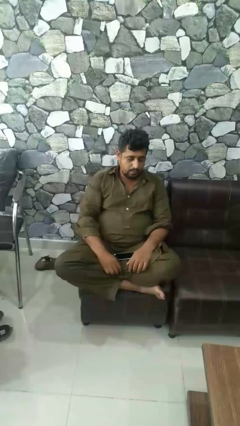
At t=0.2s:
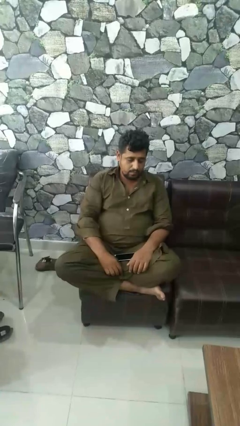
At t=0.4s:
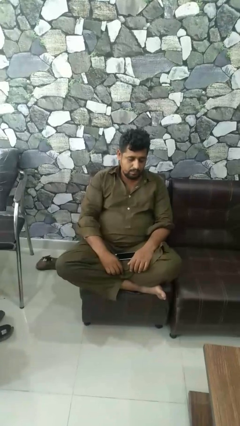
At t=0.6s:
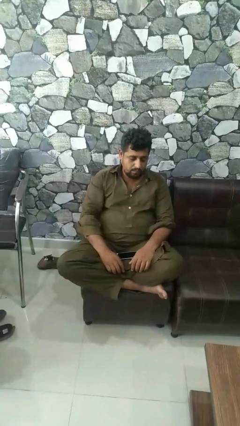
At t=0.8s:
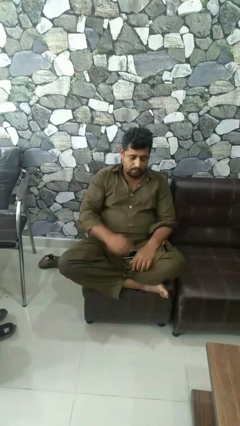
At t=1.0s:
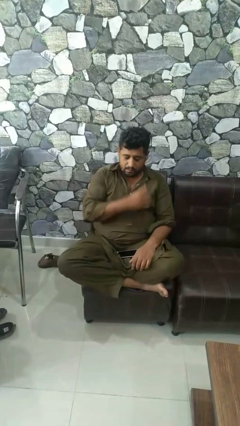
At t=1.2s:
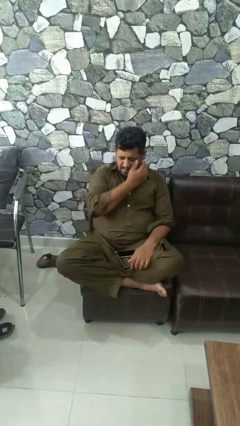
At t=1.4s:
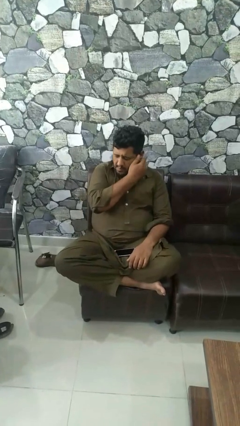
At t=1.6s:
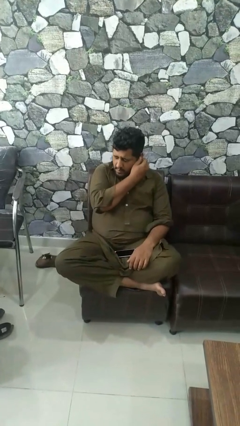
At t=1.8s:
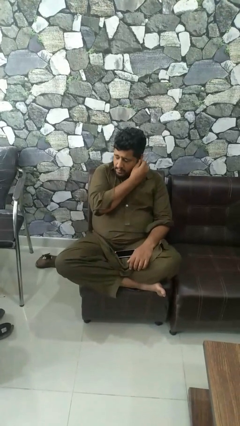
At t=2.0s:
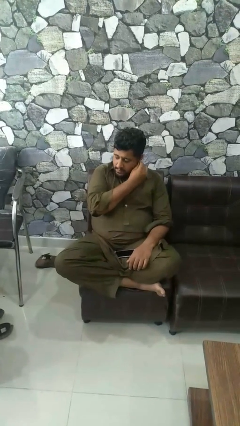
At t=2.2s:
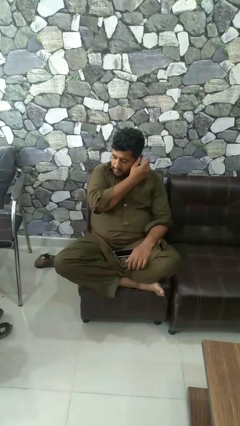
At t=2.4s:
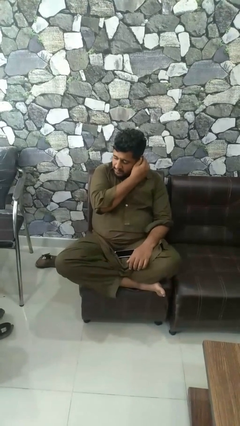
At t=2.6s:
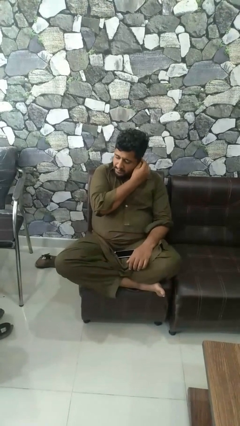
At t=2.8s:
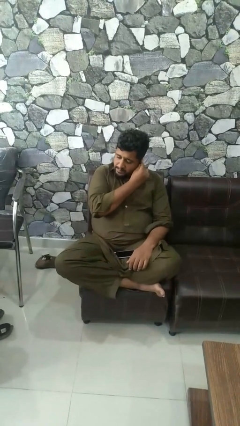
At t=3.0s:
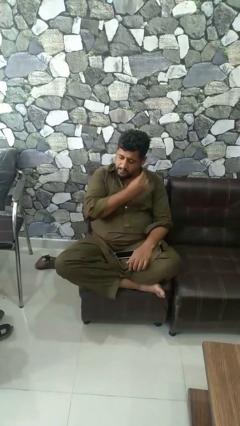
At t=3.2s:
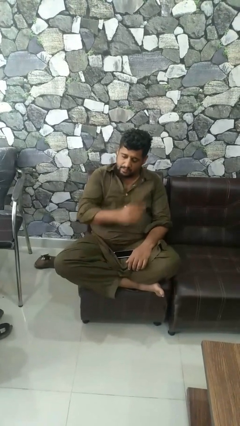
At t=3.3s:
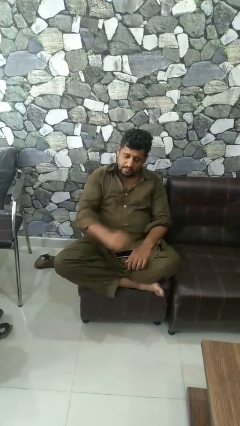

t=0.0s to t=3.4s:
person touches earlobe

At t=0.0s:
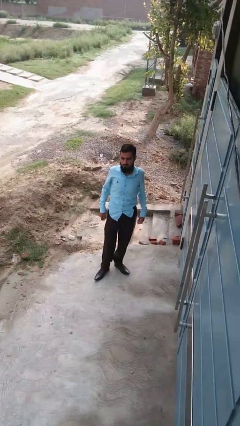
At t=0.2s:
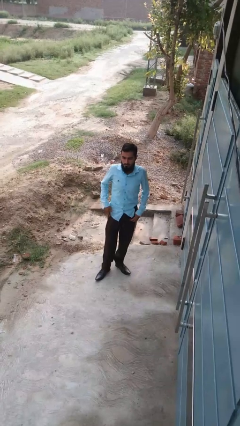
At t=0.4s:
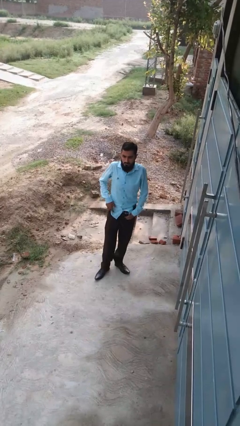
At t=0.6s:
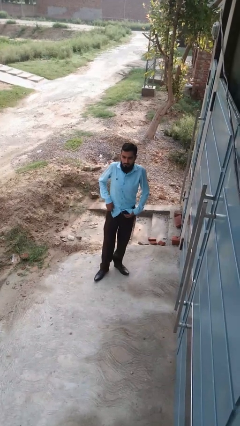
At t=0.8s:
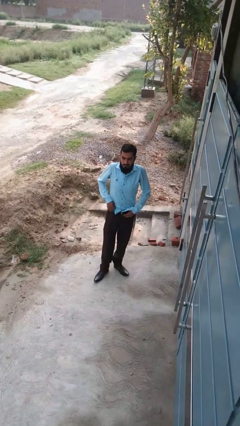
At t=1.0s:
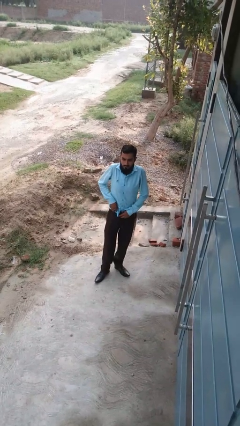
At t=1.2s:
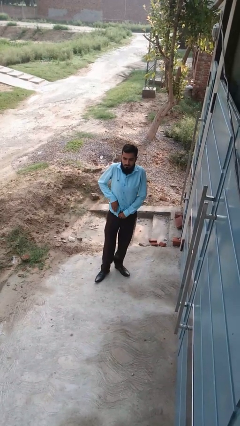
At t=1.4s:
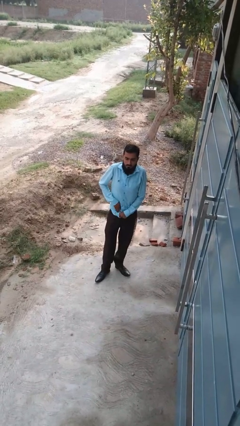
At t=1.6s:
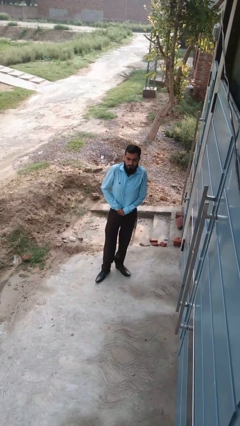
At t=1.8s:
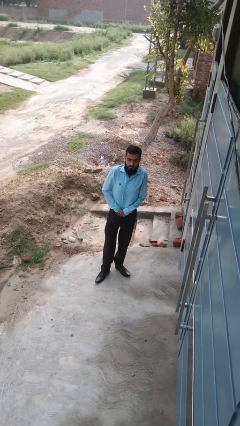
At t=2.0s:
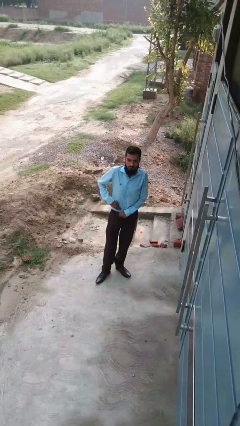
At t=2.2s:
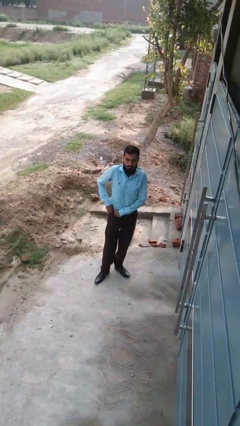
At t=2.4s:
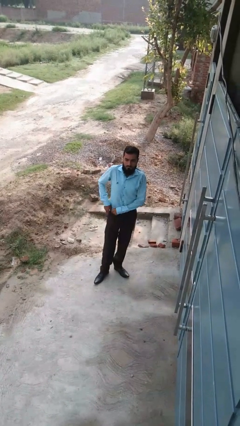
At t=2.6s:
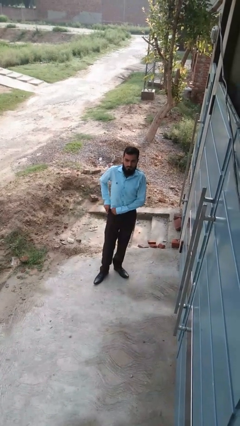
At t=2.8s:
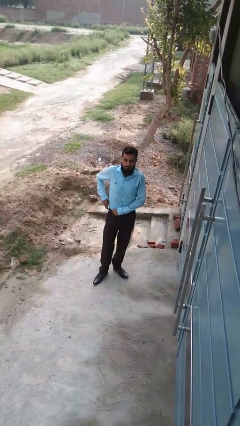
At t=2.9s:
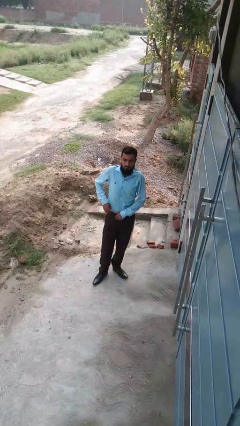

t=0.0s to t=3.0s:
person tucks in shirt

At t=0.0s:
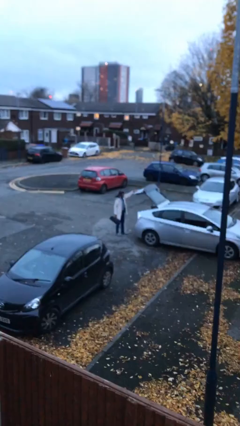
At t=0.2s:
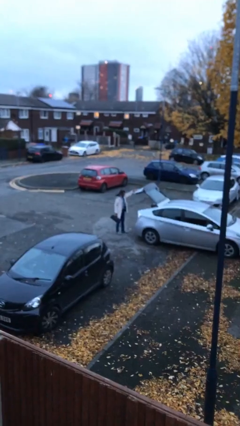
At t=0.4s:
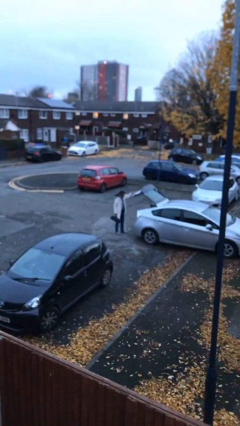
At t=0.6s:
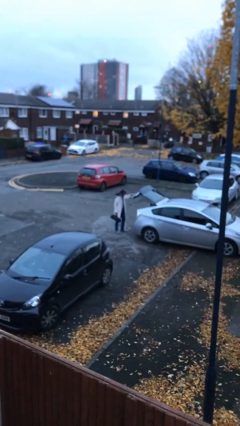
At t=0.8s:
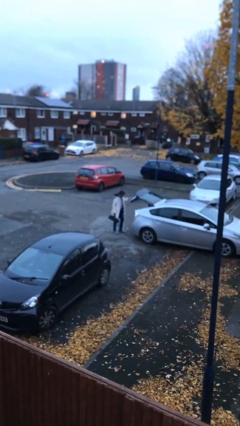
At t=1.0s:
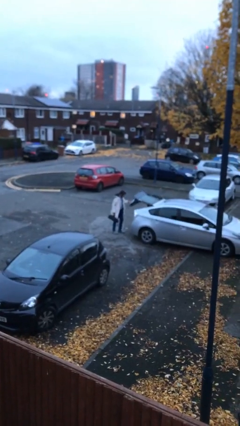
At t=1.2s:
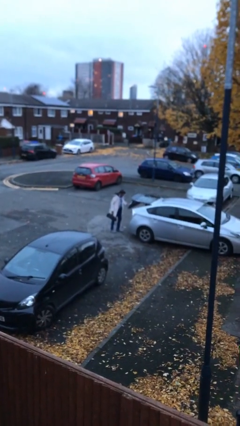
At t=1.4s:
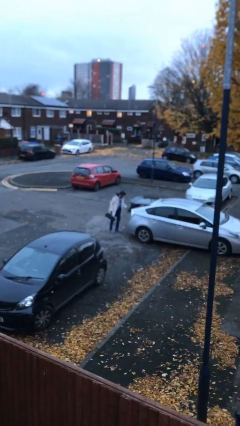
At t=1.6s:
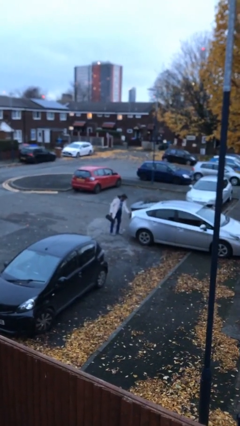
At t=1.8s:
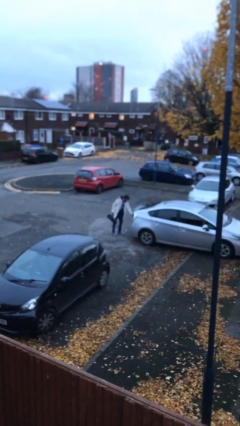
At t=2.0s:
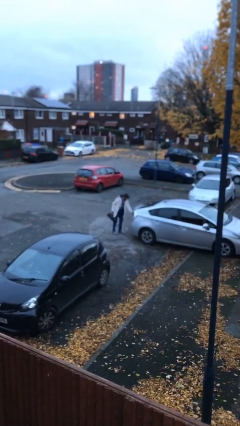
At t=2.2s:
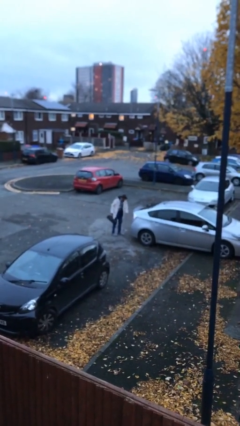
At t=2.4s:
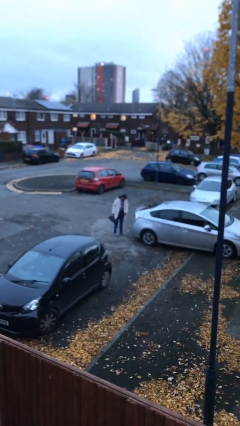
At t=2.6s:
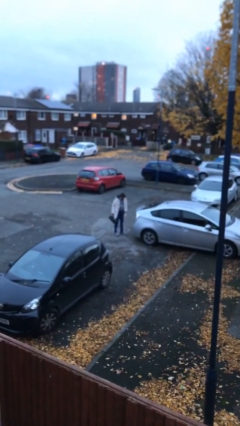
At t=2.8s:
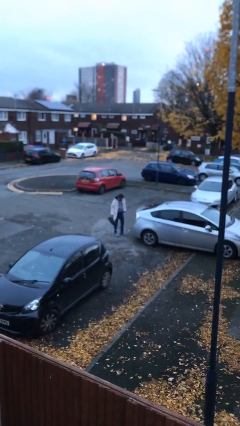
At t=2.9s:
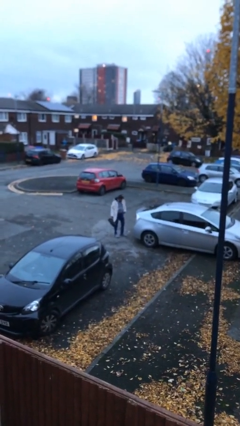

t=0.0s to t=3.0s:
person closes car trunk

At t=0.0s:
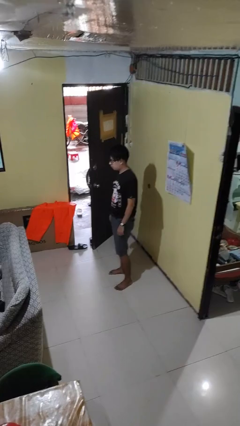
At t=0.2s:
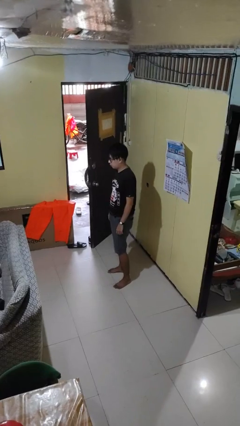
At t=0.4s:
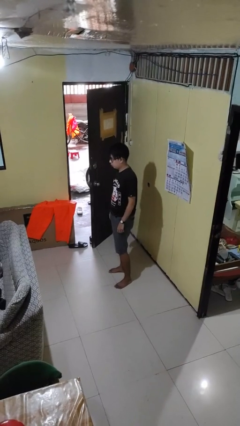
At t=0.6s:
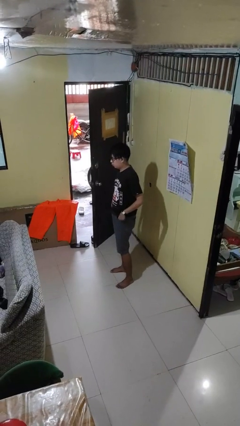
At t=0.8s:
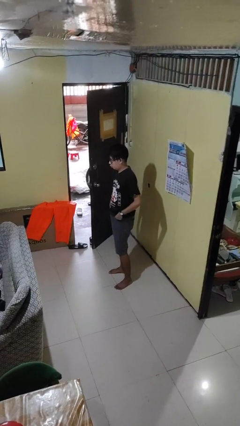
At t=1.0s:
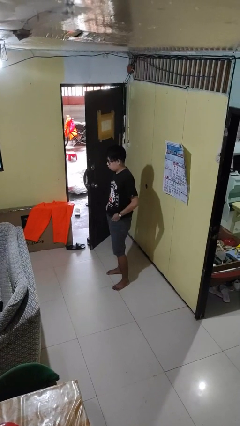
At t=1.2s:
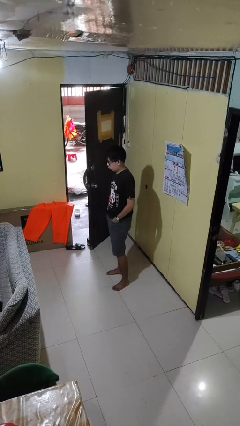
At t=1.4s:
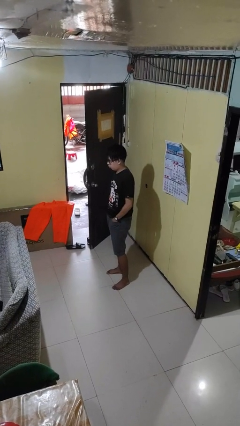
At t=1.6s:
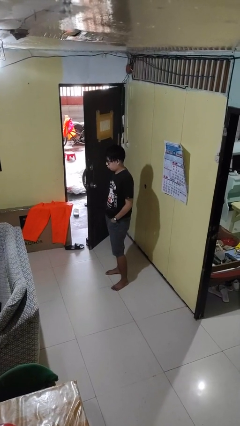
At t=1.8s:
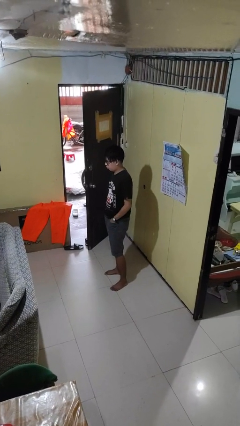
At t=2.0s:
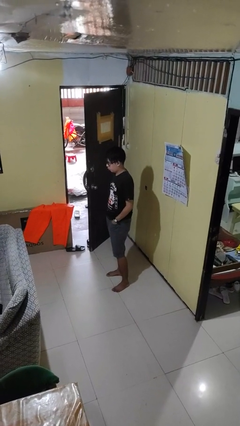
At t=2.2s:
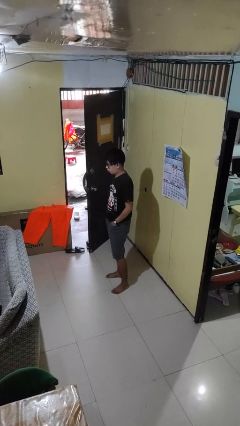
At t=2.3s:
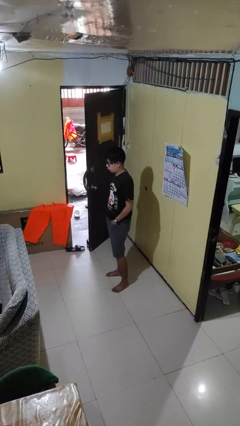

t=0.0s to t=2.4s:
person puts hands in back pockets

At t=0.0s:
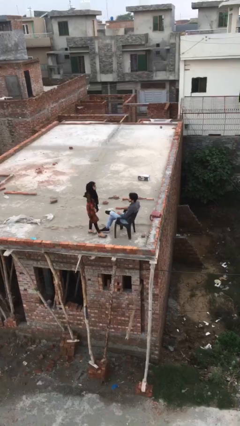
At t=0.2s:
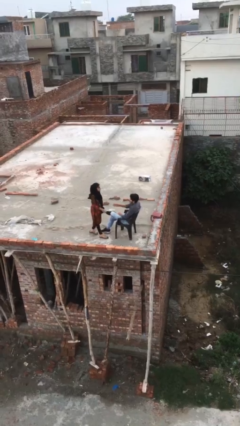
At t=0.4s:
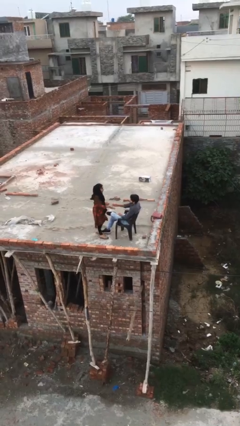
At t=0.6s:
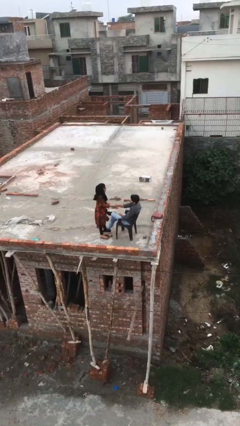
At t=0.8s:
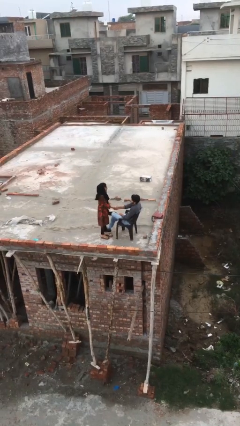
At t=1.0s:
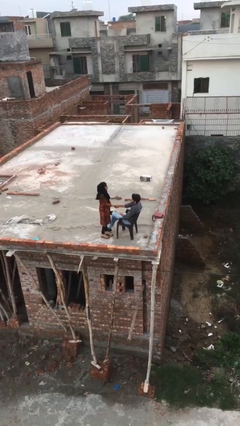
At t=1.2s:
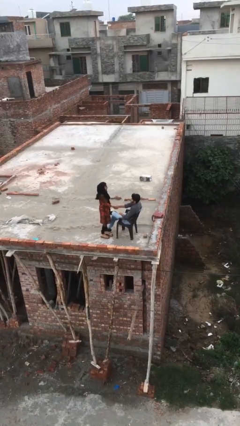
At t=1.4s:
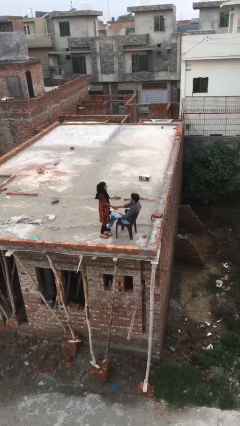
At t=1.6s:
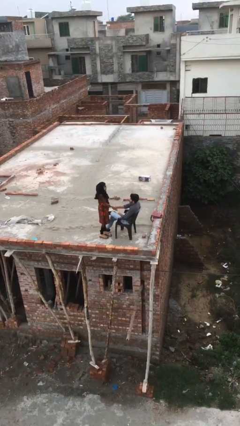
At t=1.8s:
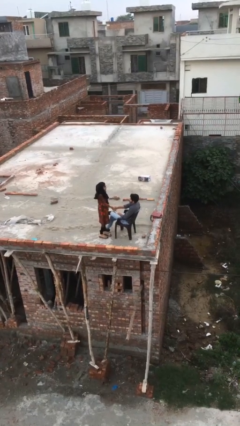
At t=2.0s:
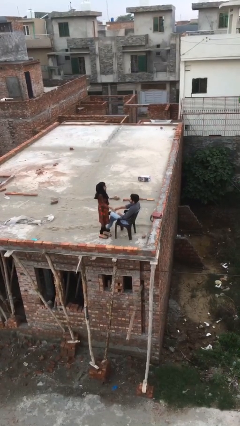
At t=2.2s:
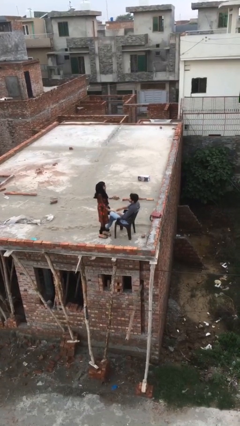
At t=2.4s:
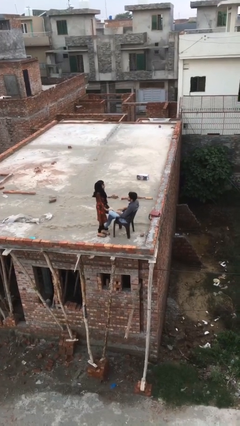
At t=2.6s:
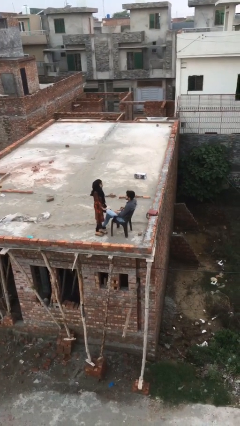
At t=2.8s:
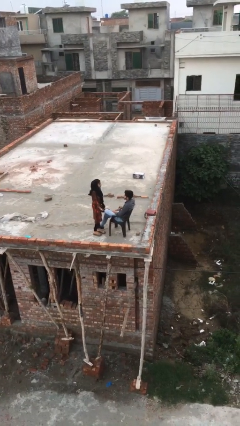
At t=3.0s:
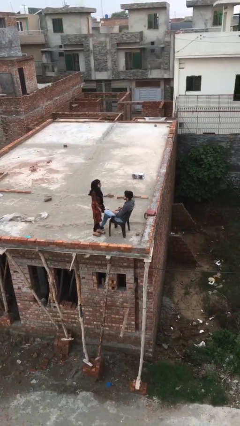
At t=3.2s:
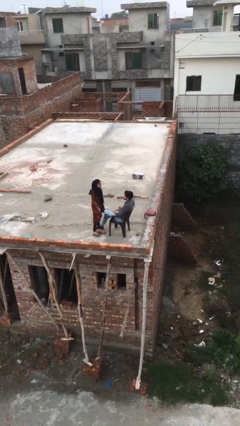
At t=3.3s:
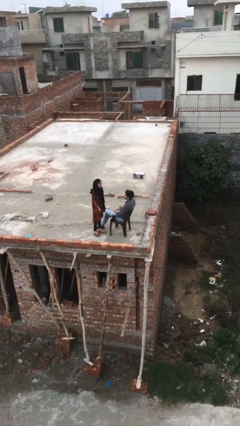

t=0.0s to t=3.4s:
person shakes hand

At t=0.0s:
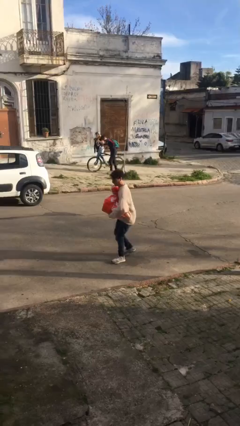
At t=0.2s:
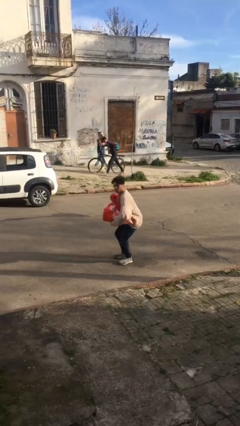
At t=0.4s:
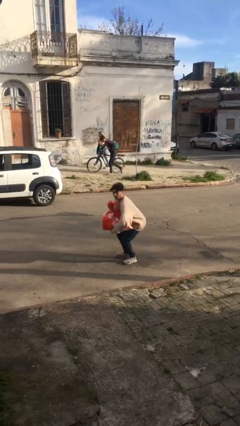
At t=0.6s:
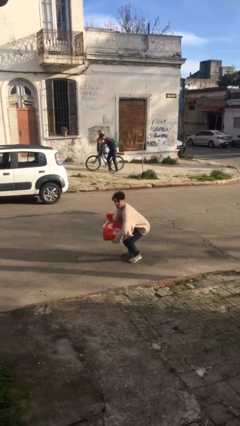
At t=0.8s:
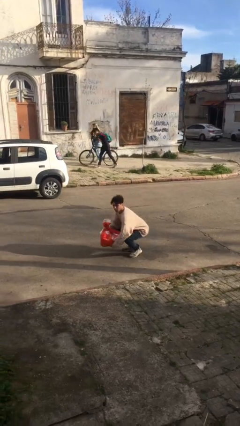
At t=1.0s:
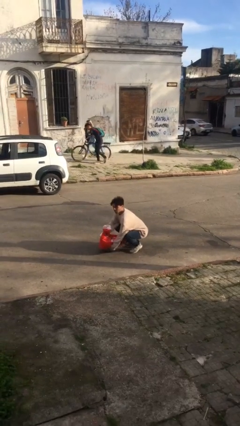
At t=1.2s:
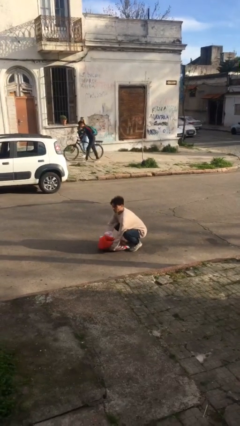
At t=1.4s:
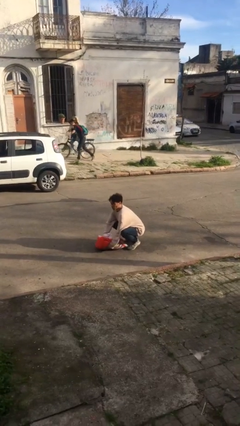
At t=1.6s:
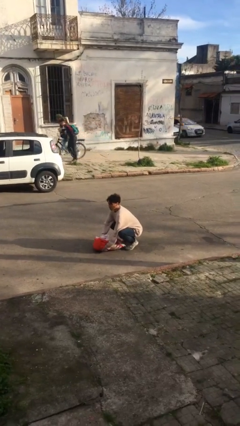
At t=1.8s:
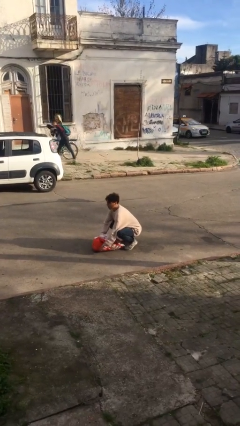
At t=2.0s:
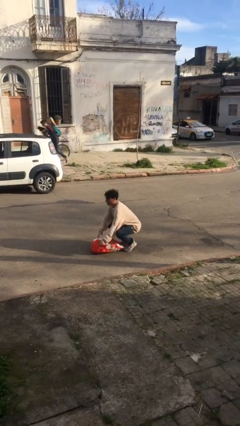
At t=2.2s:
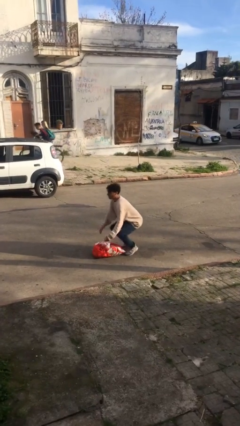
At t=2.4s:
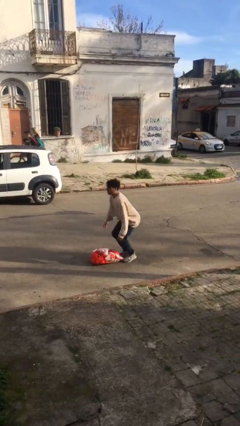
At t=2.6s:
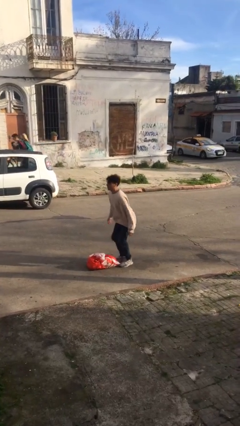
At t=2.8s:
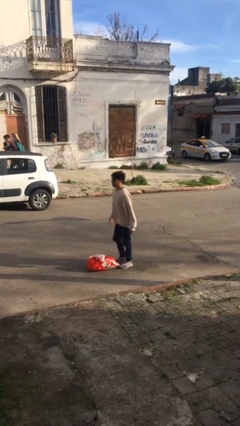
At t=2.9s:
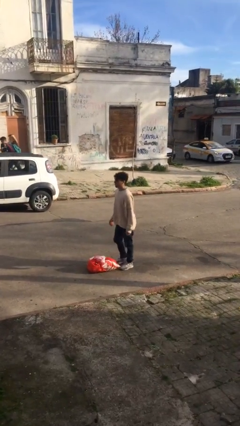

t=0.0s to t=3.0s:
person puts down object on floor
